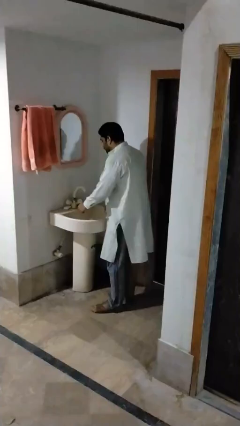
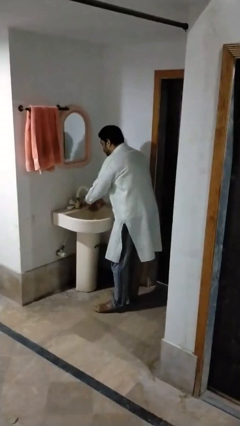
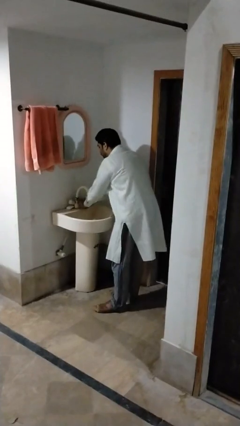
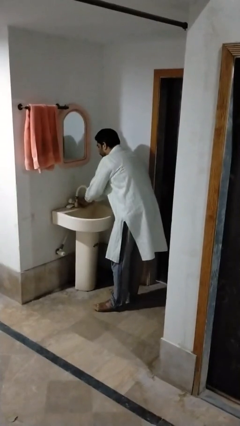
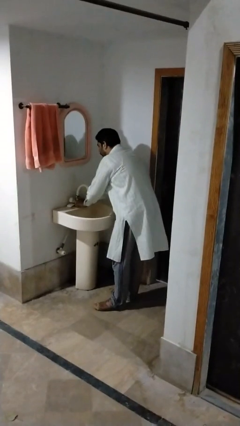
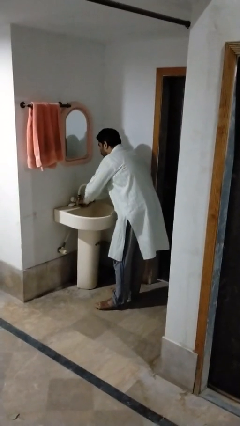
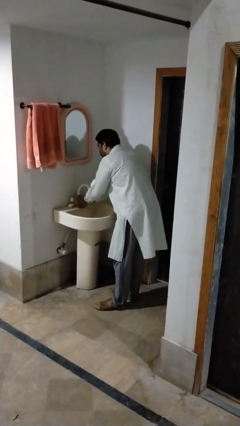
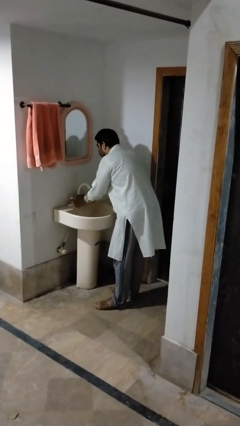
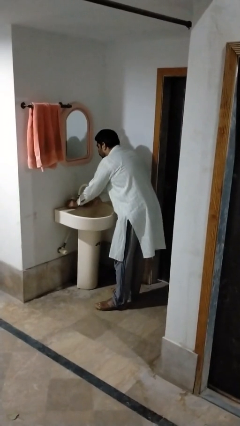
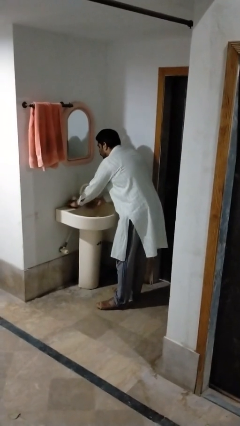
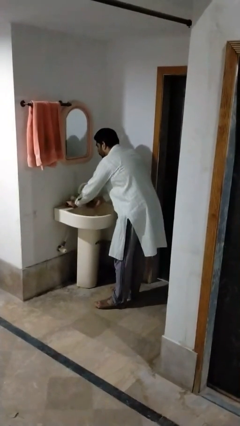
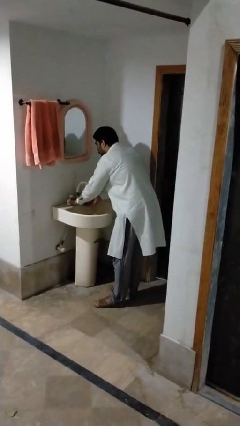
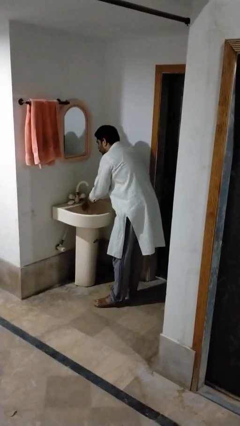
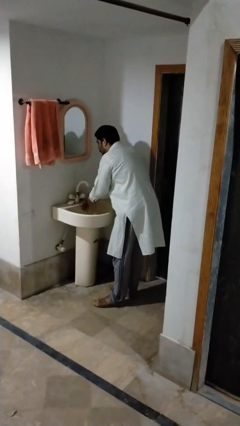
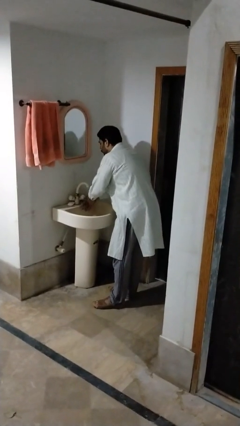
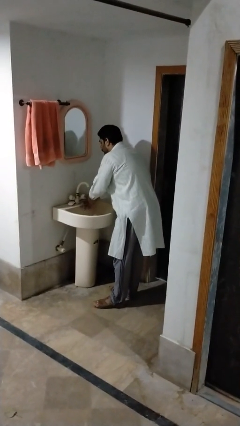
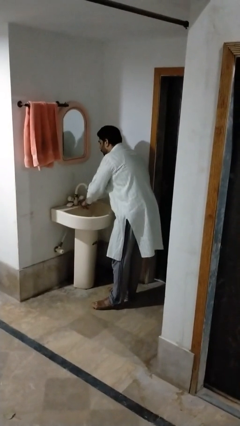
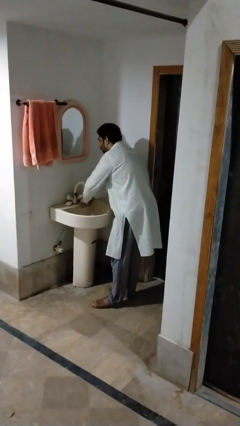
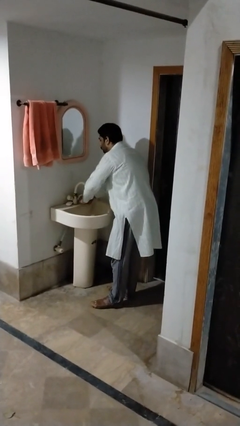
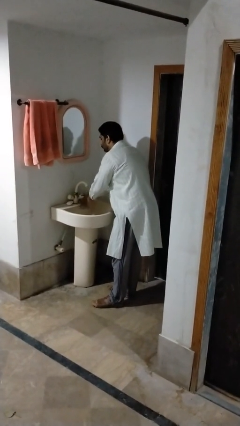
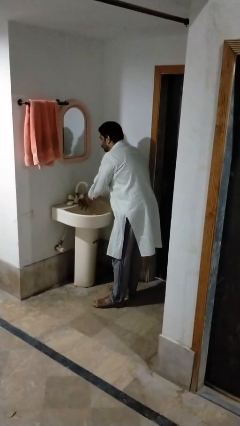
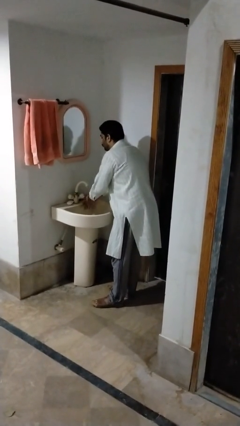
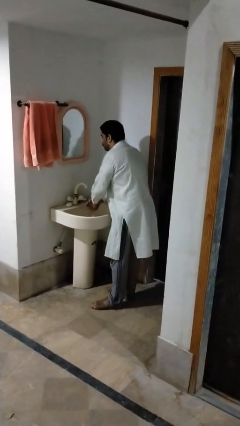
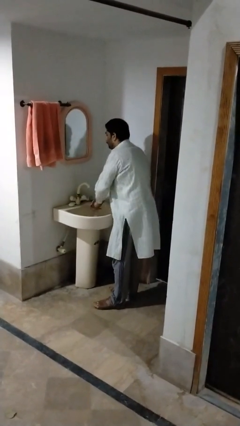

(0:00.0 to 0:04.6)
person washes hands

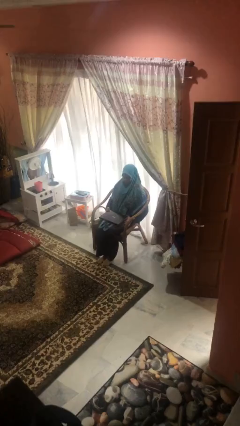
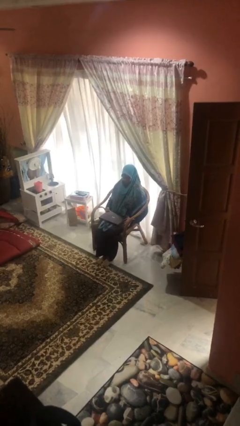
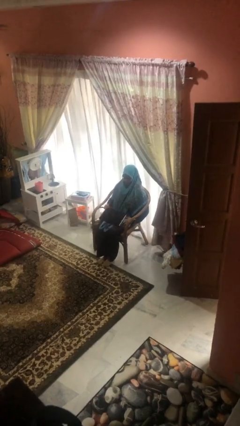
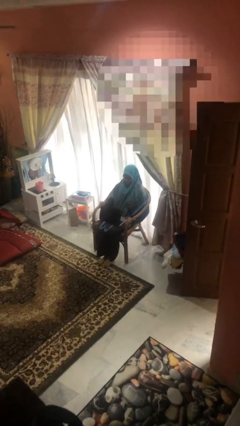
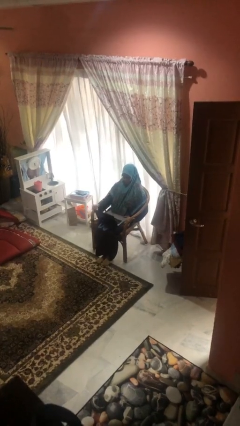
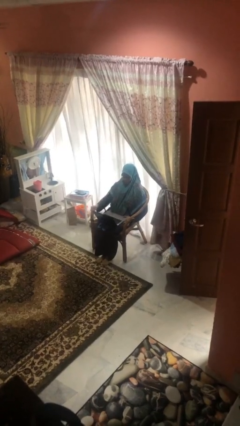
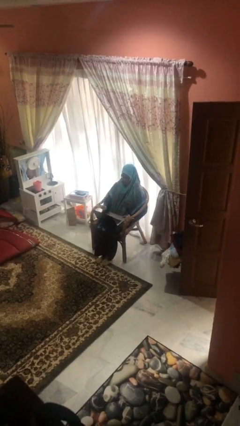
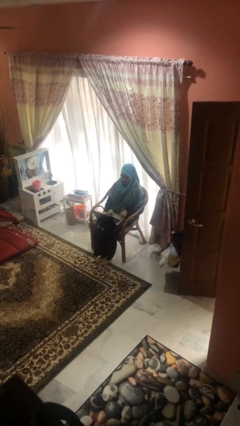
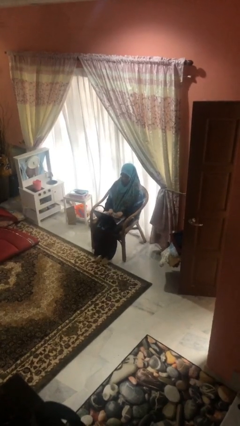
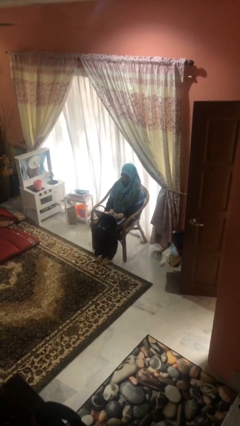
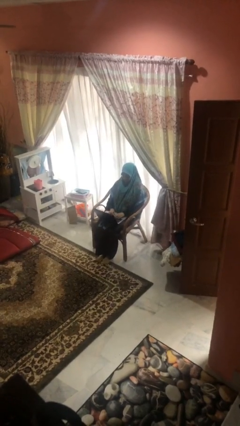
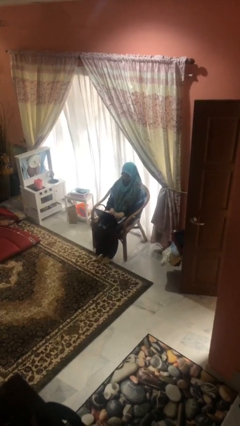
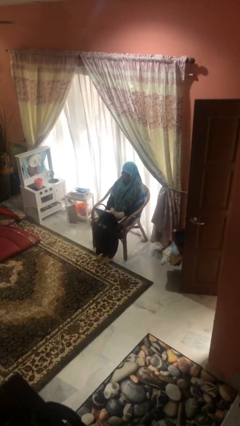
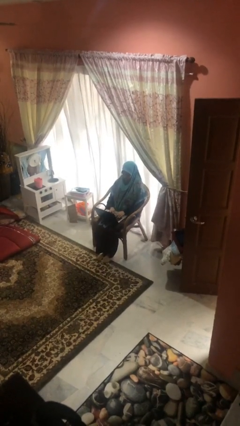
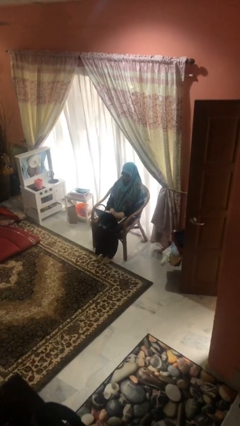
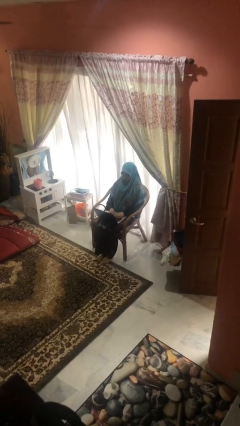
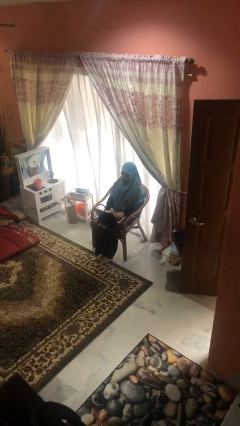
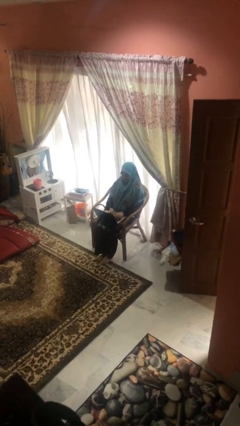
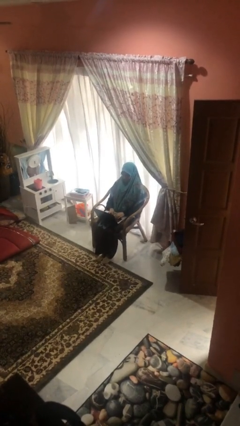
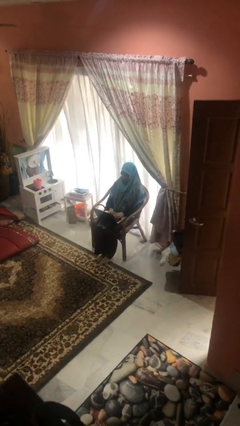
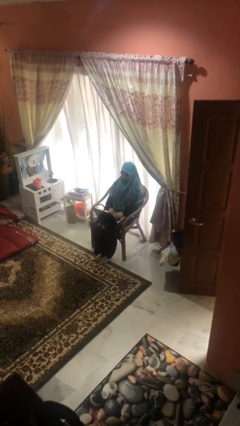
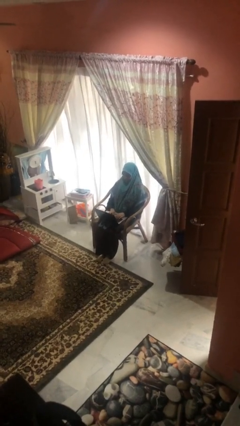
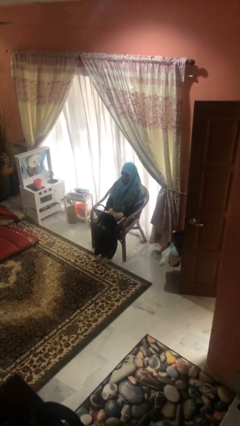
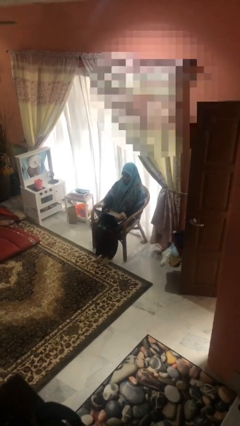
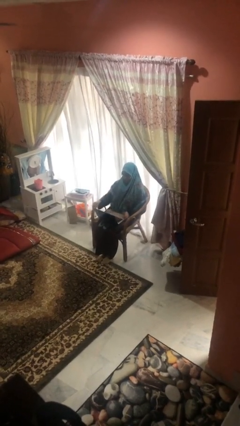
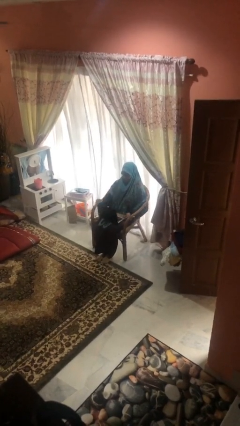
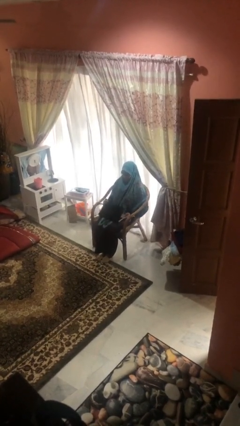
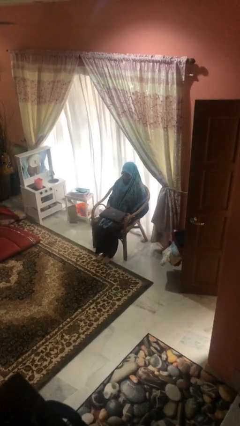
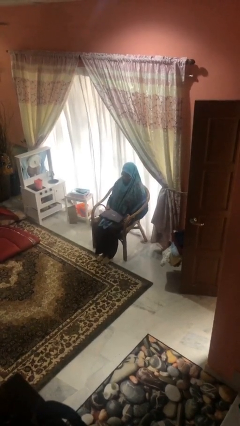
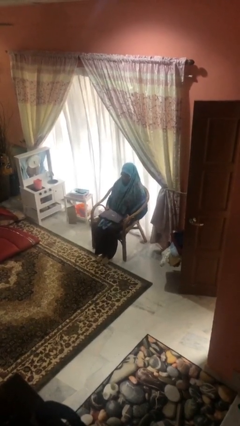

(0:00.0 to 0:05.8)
person interacts with laptop

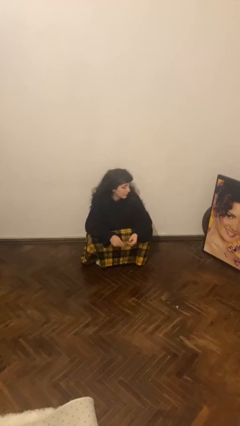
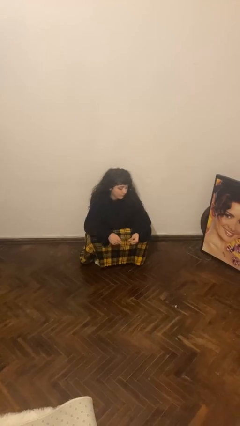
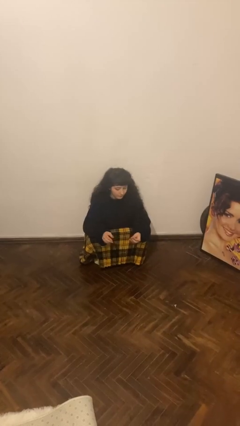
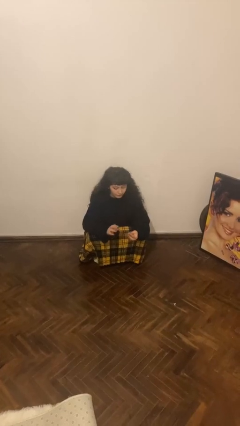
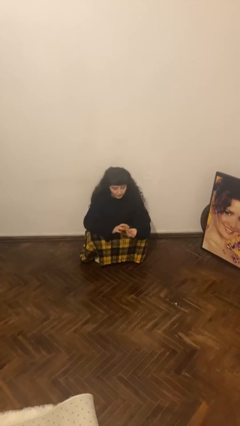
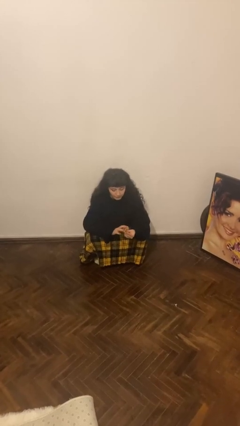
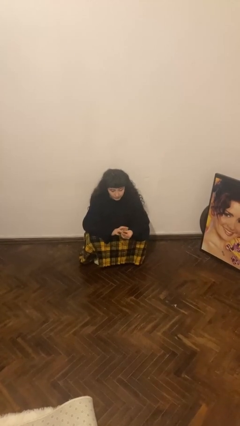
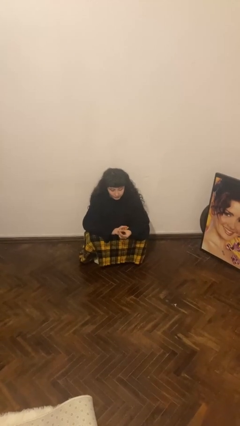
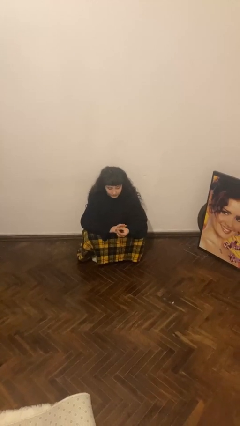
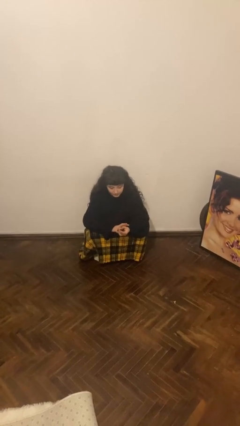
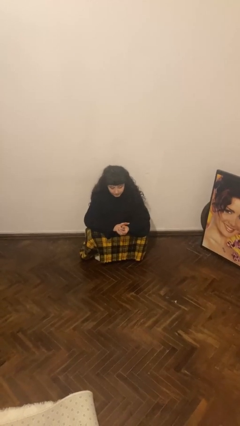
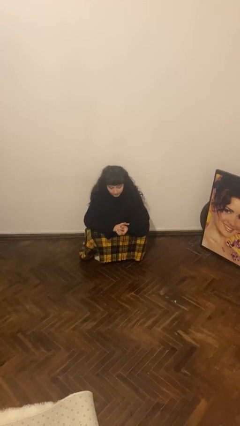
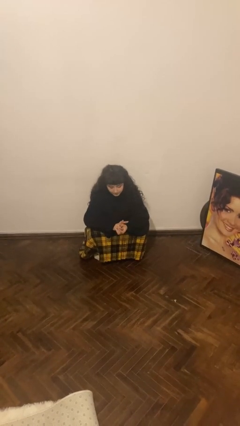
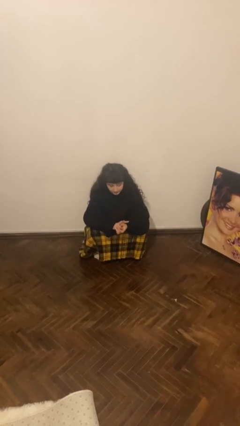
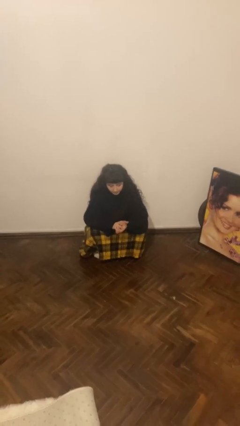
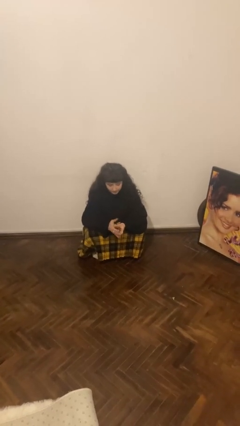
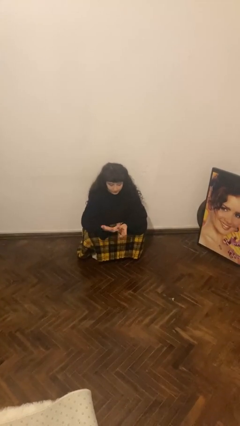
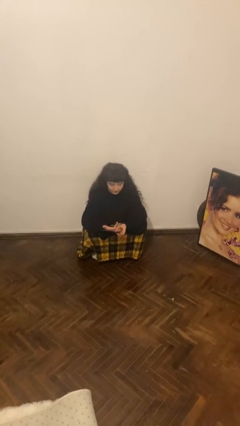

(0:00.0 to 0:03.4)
person puts on ring

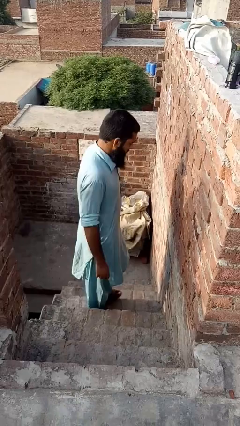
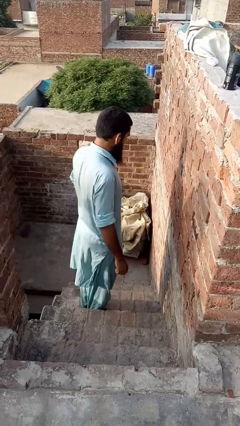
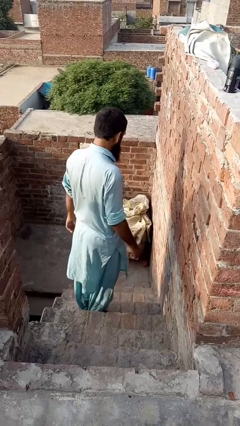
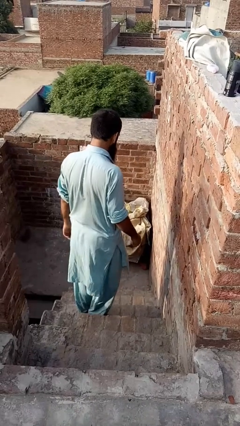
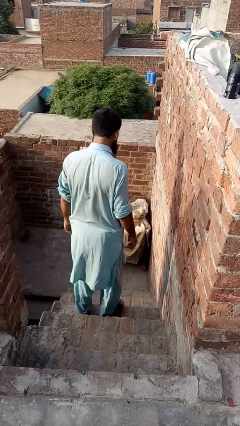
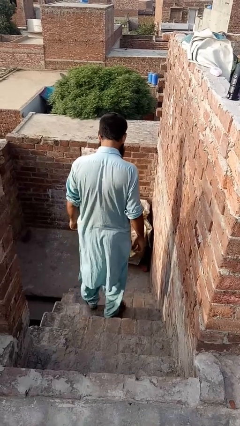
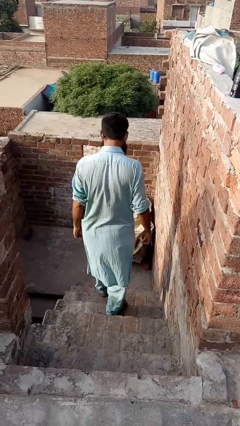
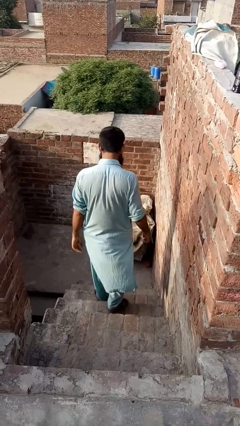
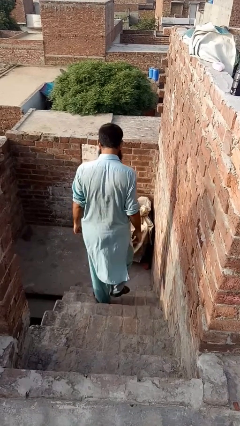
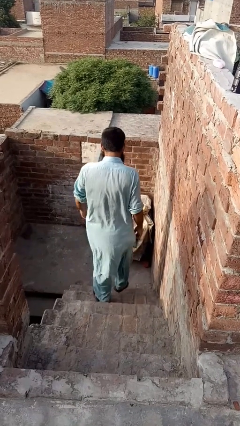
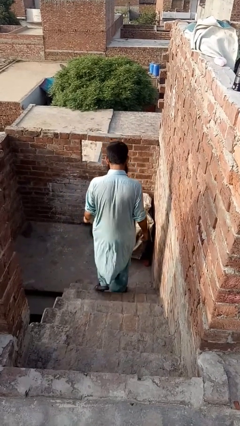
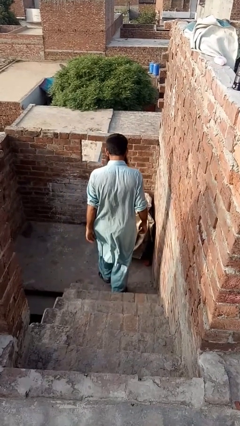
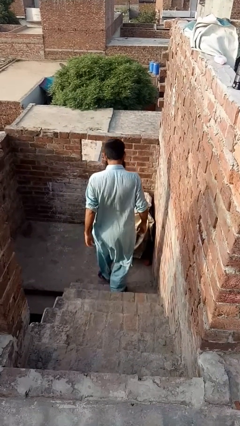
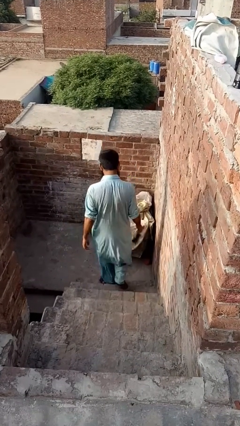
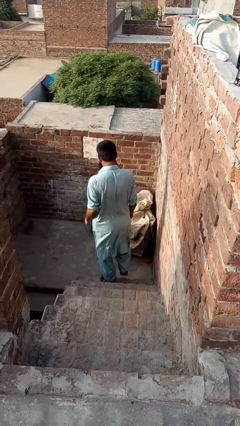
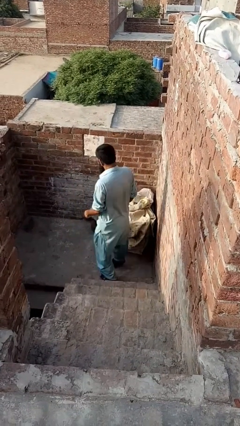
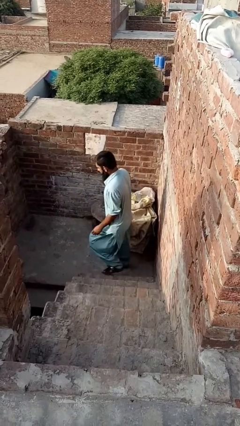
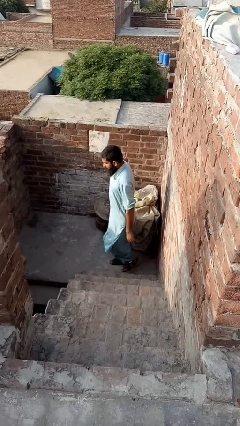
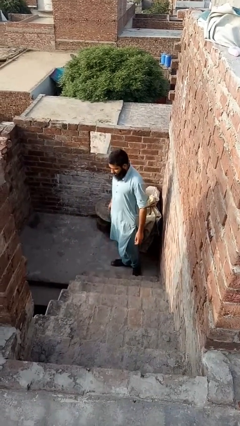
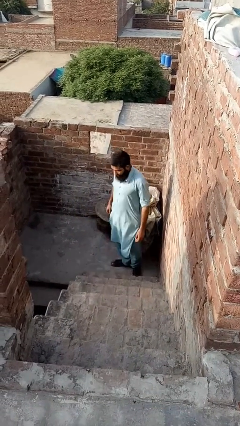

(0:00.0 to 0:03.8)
person climbs down stairs

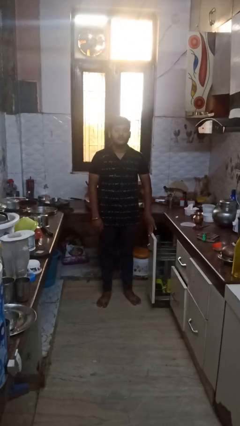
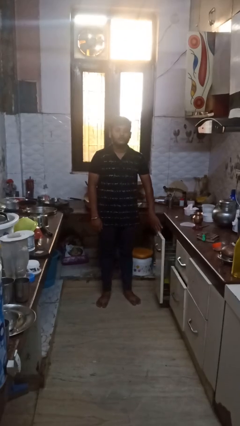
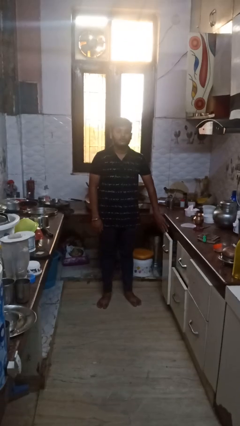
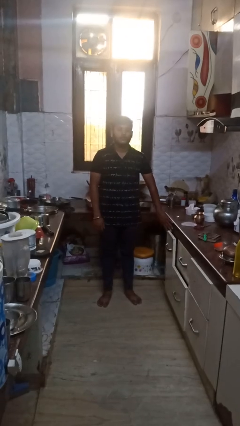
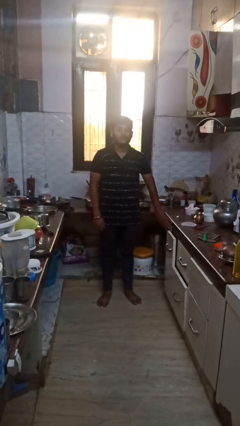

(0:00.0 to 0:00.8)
person closes dishwasher
